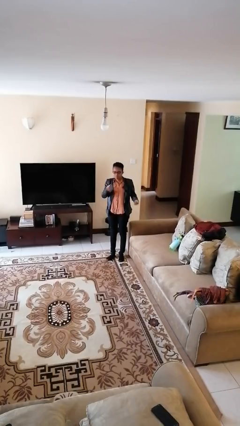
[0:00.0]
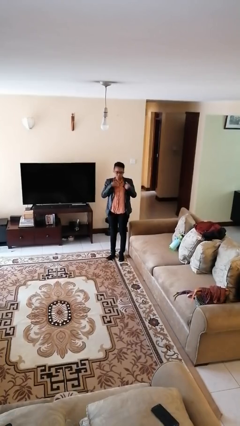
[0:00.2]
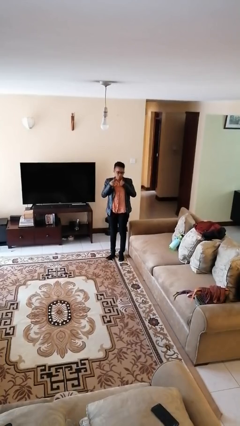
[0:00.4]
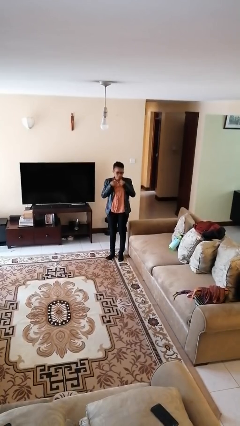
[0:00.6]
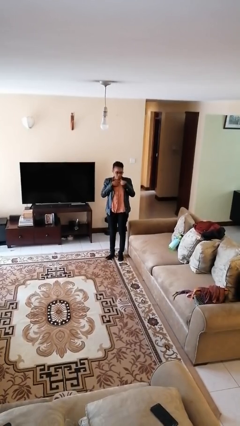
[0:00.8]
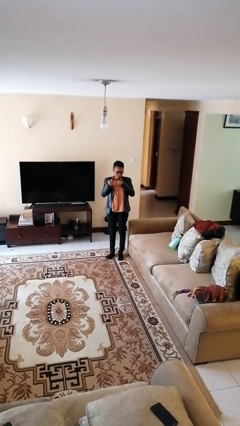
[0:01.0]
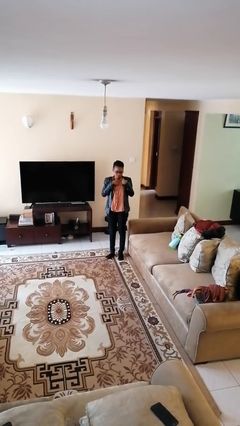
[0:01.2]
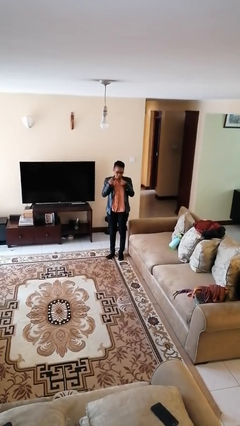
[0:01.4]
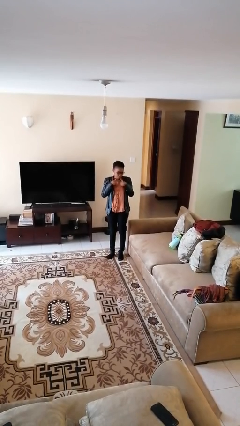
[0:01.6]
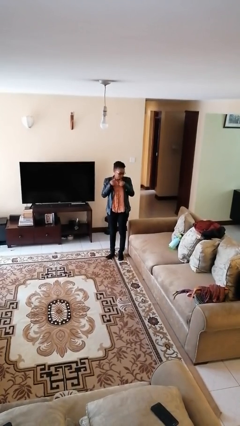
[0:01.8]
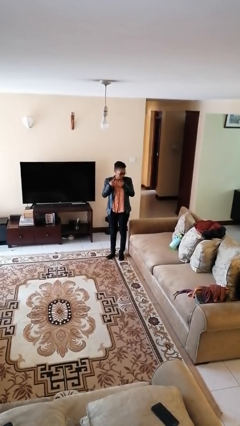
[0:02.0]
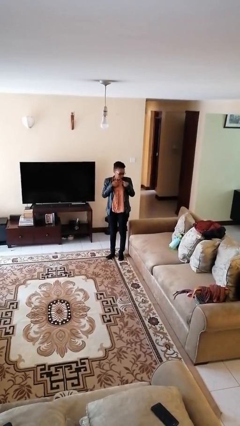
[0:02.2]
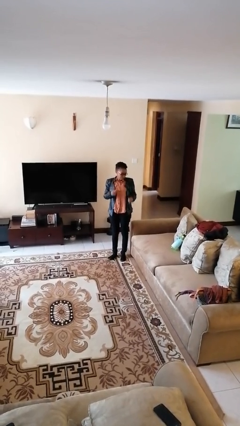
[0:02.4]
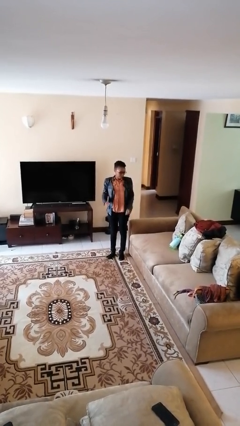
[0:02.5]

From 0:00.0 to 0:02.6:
person drums on chest

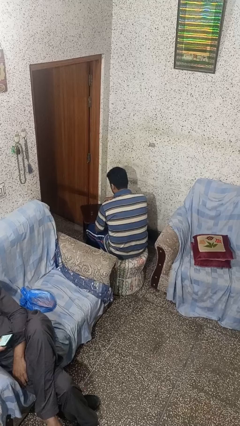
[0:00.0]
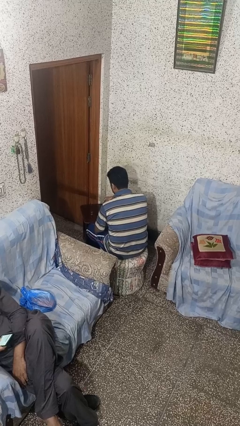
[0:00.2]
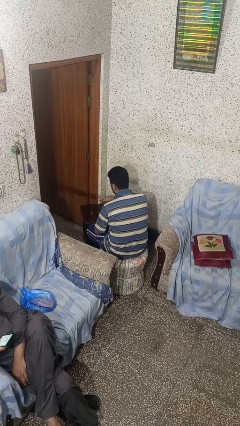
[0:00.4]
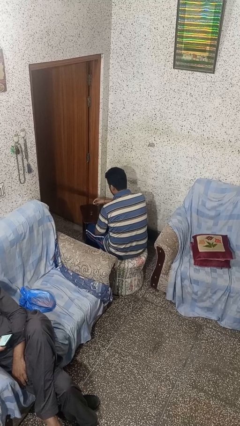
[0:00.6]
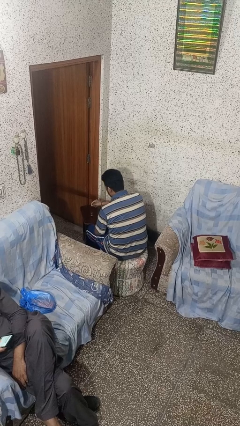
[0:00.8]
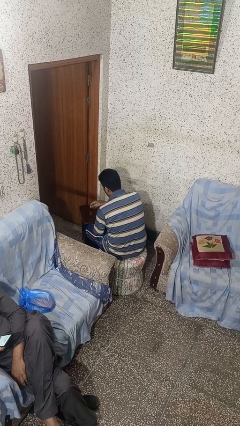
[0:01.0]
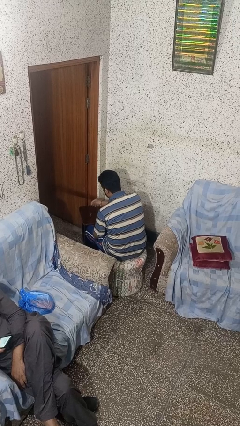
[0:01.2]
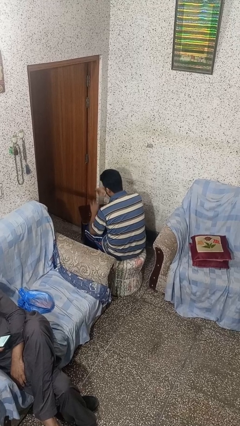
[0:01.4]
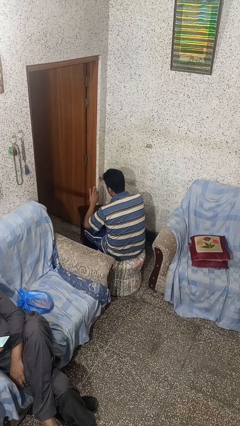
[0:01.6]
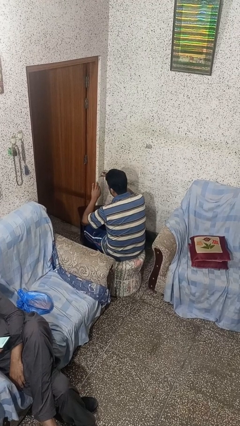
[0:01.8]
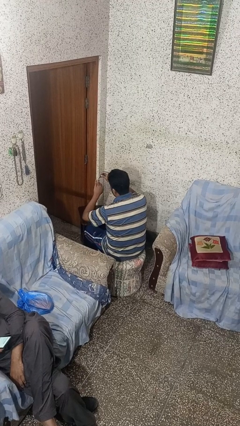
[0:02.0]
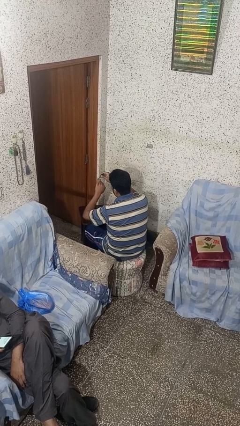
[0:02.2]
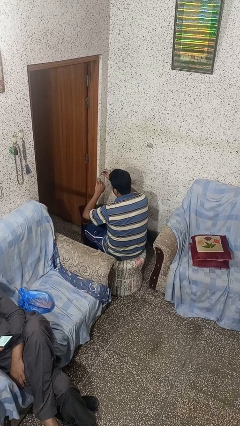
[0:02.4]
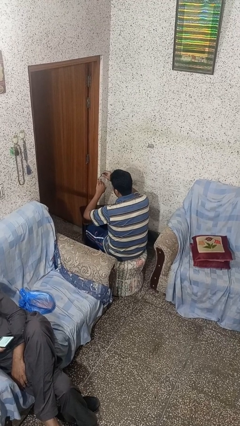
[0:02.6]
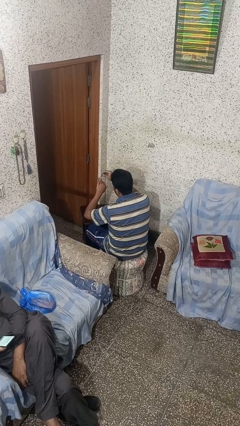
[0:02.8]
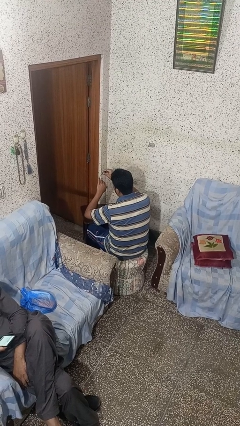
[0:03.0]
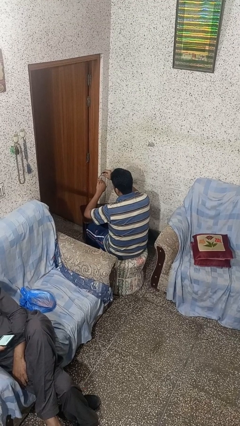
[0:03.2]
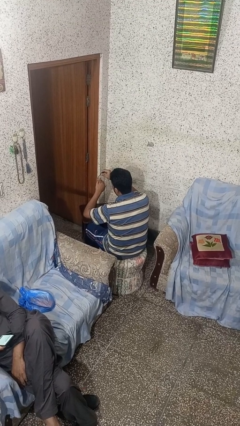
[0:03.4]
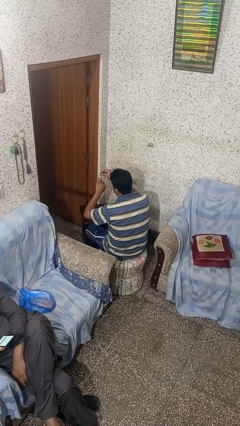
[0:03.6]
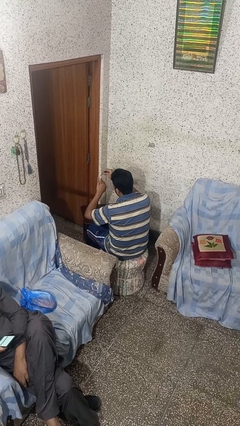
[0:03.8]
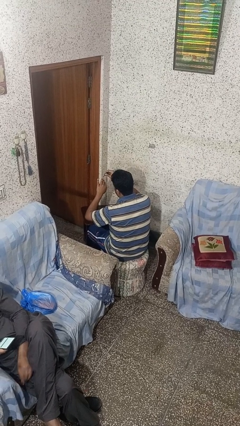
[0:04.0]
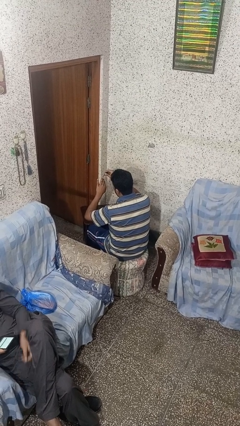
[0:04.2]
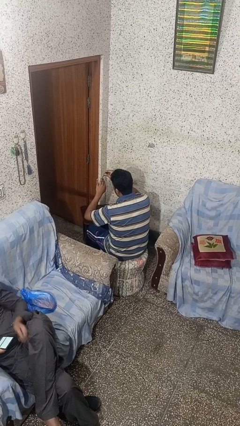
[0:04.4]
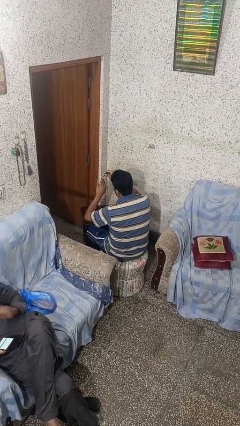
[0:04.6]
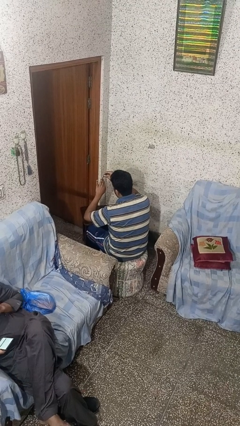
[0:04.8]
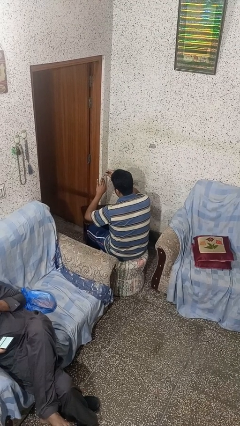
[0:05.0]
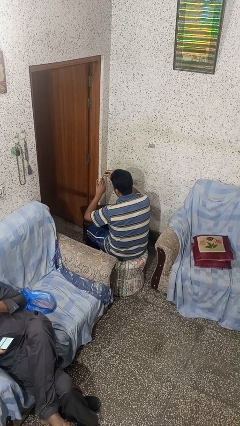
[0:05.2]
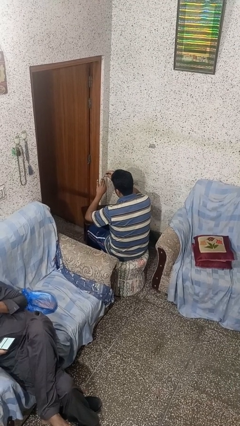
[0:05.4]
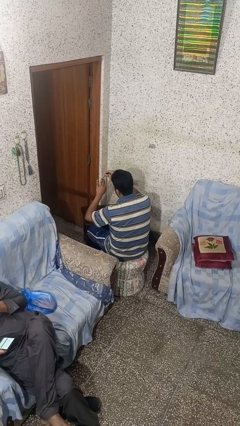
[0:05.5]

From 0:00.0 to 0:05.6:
person paints fingernails

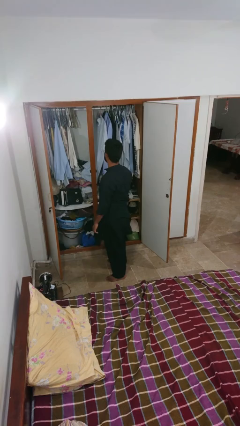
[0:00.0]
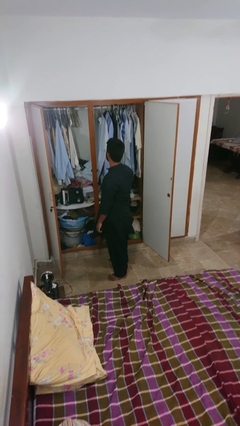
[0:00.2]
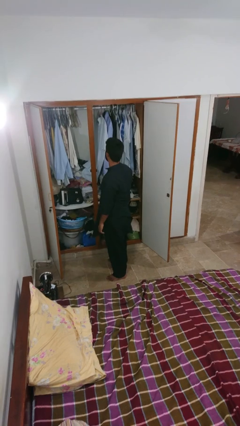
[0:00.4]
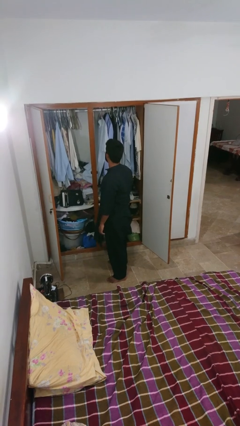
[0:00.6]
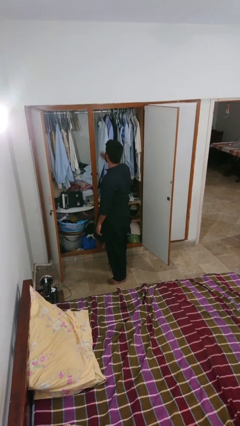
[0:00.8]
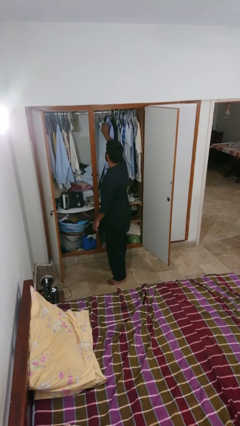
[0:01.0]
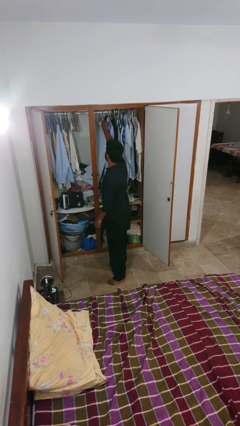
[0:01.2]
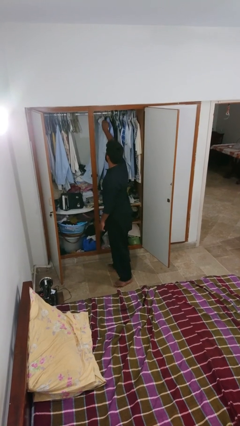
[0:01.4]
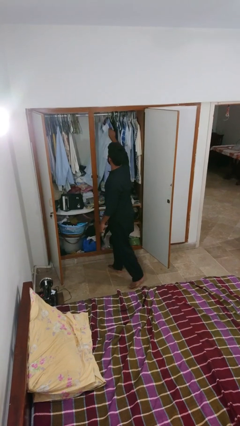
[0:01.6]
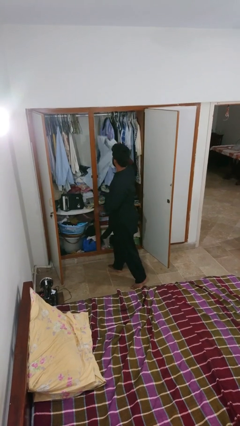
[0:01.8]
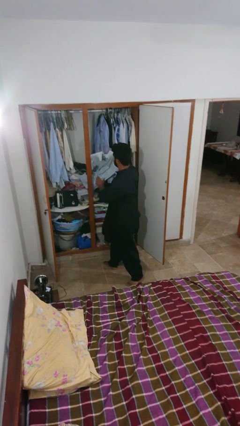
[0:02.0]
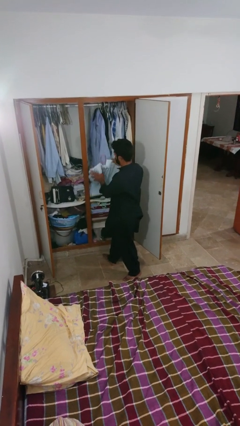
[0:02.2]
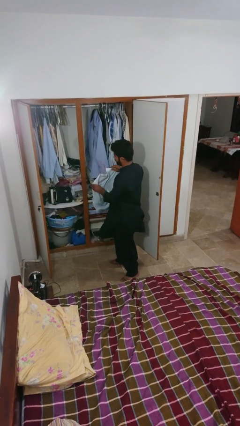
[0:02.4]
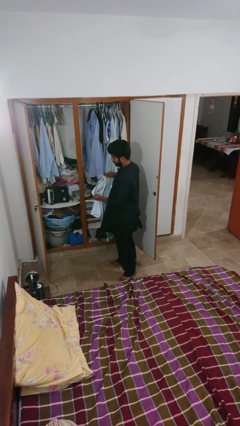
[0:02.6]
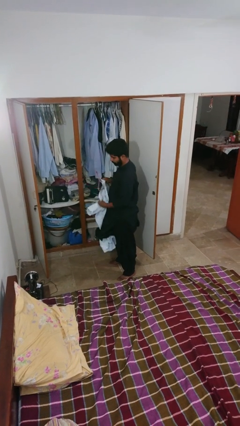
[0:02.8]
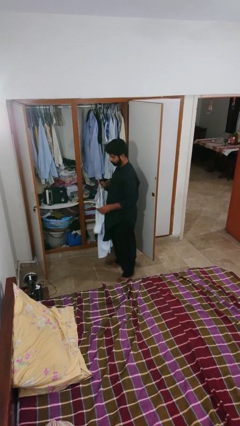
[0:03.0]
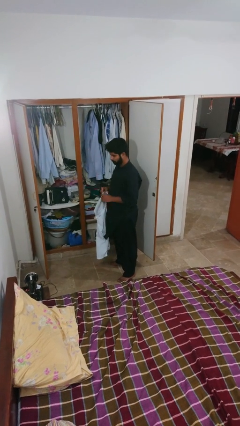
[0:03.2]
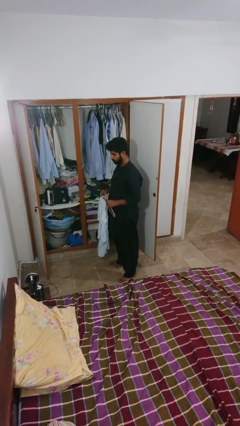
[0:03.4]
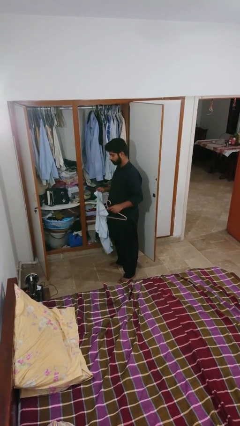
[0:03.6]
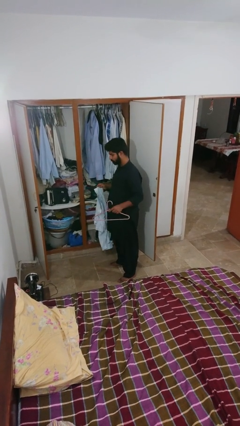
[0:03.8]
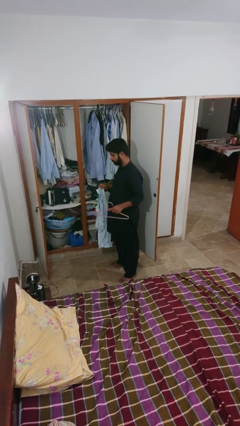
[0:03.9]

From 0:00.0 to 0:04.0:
person takes clothes from closet

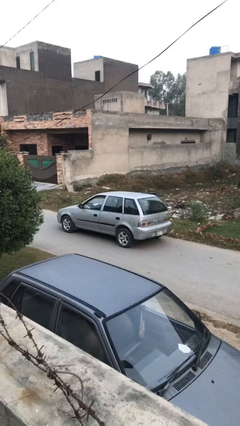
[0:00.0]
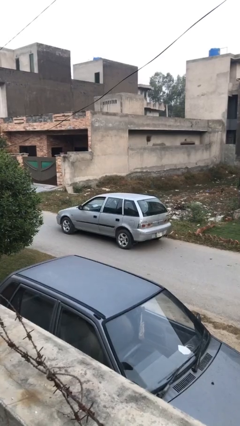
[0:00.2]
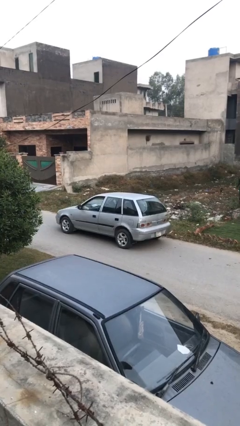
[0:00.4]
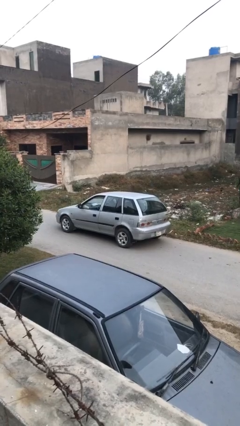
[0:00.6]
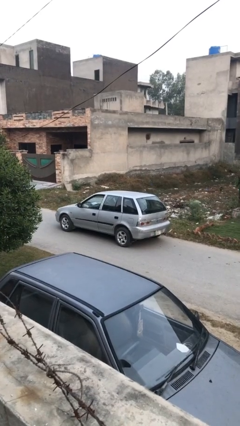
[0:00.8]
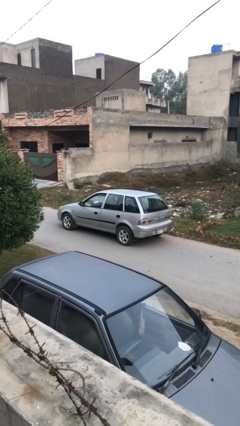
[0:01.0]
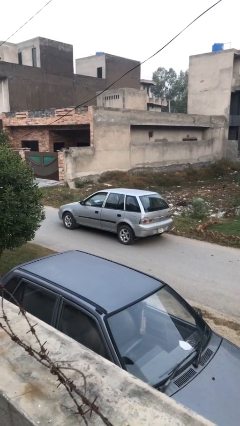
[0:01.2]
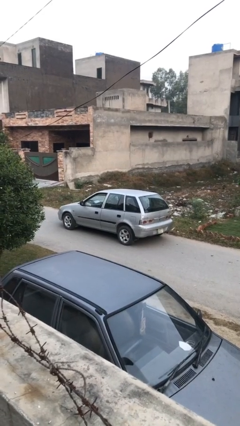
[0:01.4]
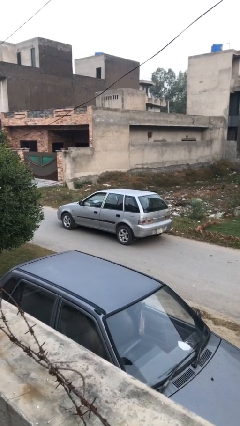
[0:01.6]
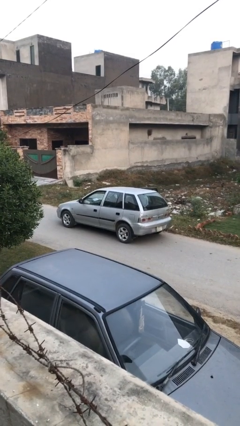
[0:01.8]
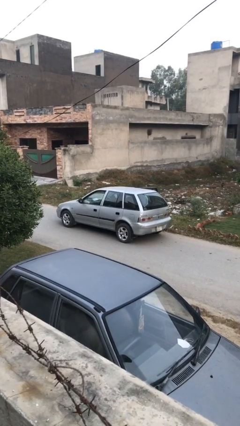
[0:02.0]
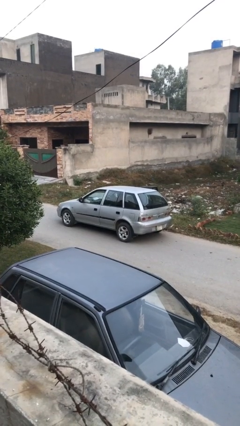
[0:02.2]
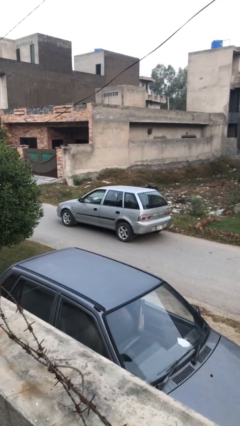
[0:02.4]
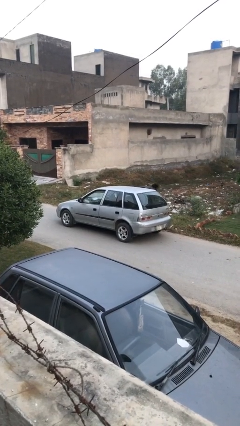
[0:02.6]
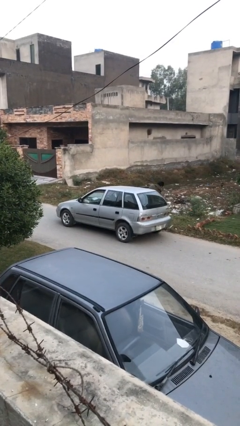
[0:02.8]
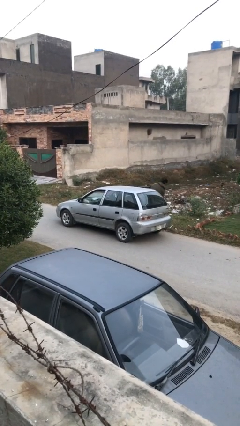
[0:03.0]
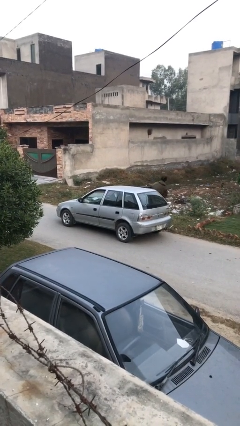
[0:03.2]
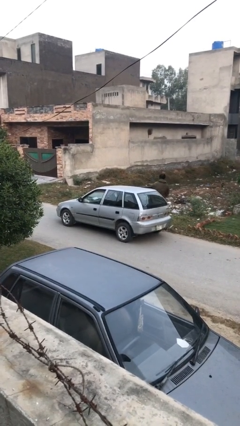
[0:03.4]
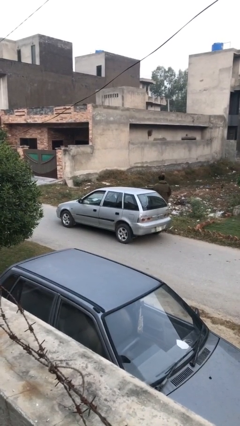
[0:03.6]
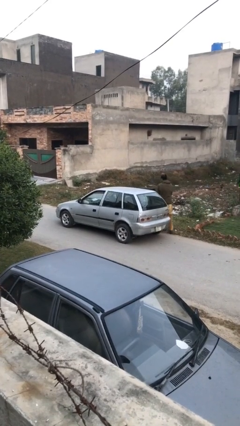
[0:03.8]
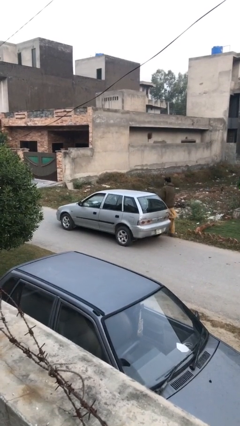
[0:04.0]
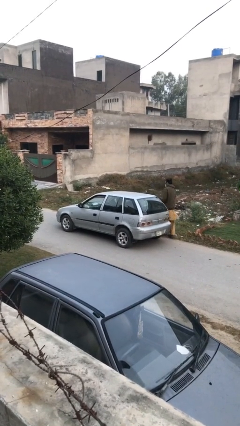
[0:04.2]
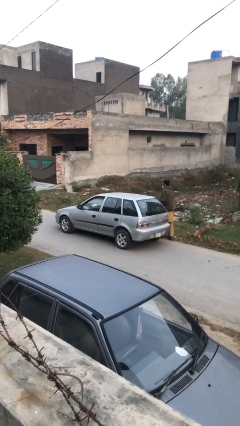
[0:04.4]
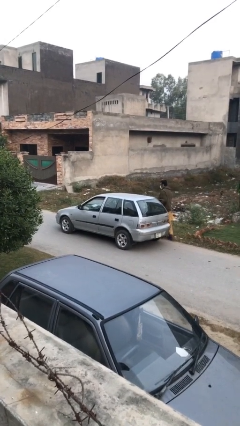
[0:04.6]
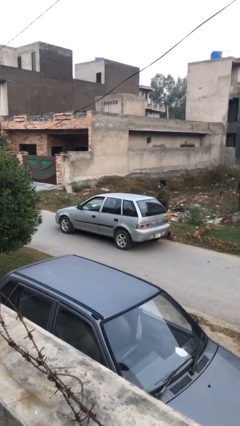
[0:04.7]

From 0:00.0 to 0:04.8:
car drops off person

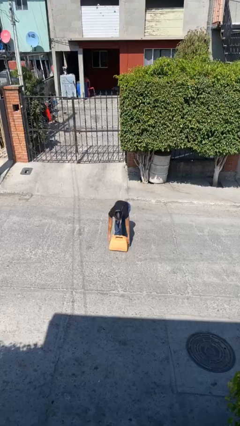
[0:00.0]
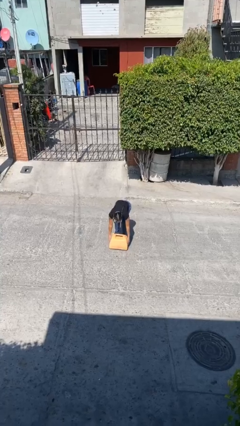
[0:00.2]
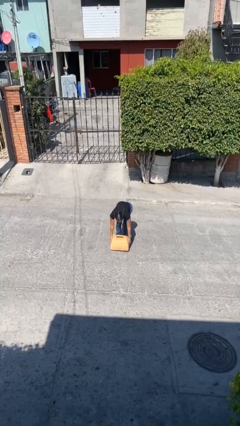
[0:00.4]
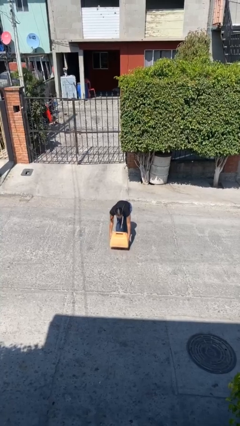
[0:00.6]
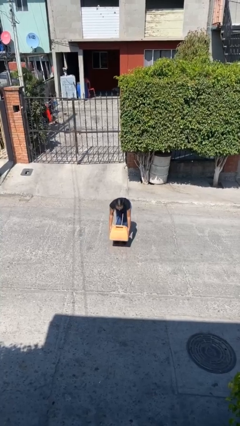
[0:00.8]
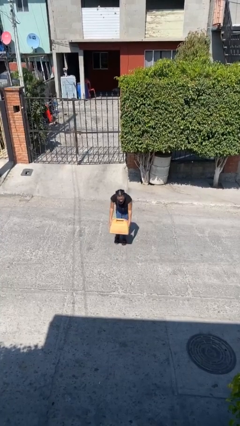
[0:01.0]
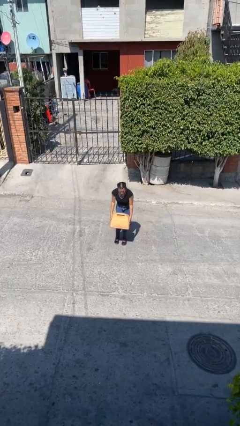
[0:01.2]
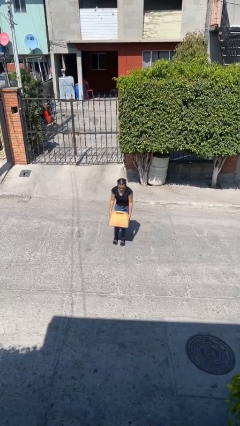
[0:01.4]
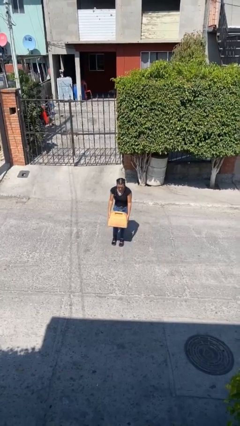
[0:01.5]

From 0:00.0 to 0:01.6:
person picks up object from floor
